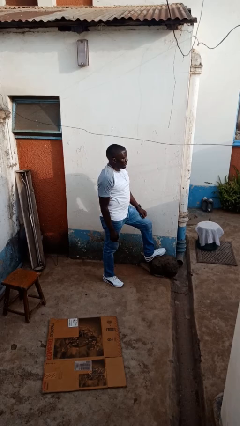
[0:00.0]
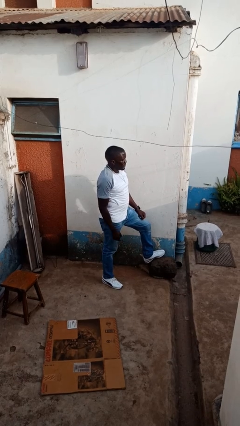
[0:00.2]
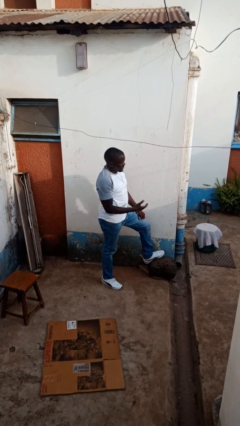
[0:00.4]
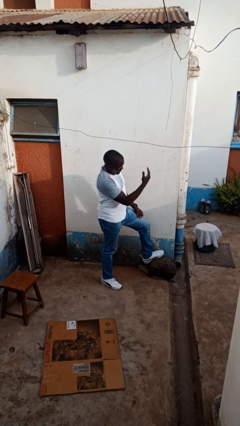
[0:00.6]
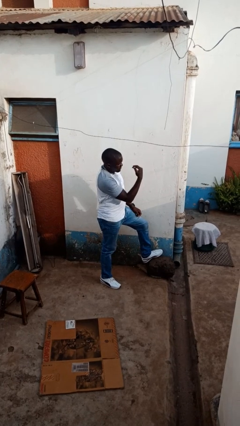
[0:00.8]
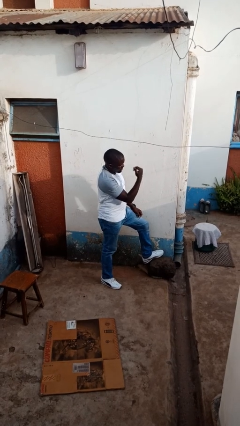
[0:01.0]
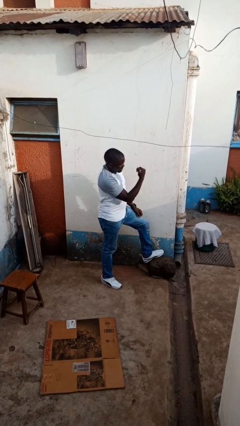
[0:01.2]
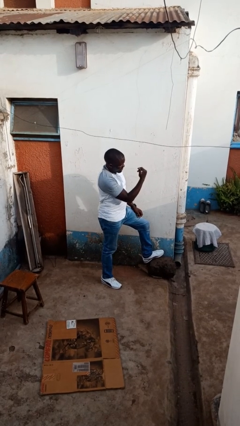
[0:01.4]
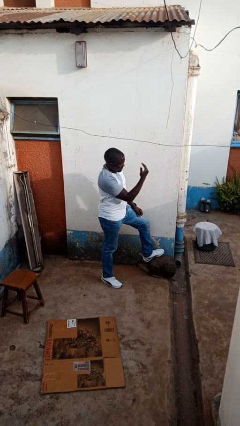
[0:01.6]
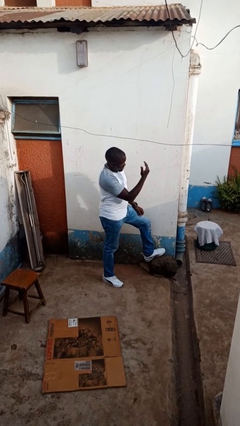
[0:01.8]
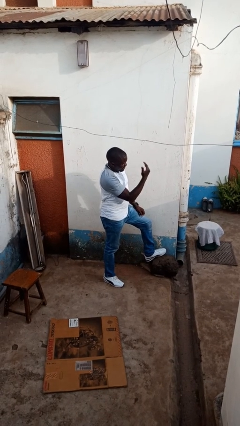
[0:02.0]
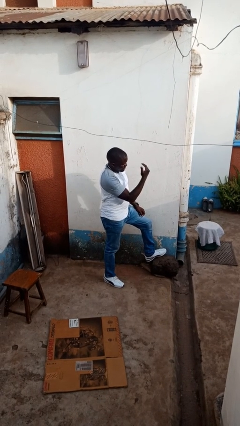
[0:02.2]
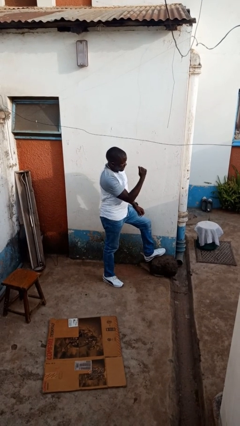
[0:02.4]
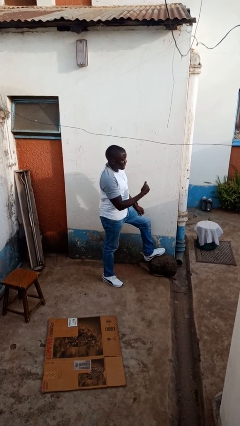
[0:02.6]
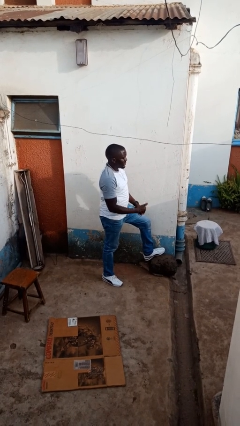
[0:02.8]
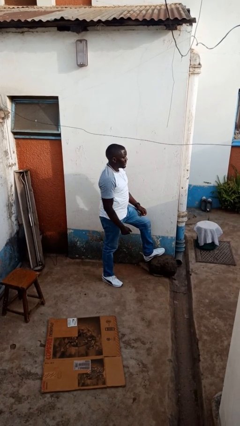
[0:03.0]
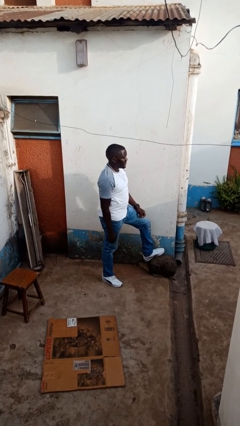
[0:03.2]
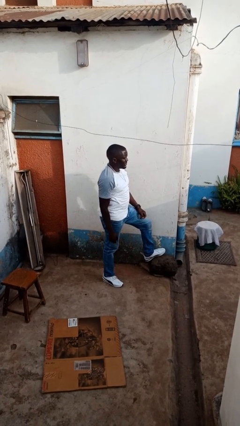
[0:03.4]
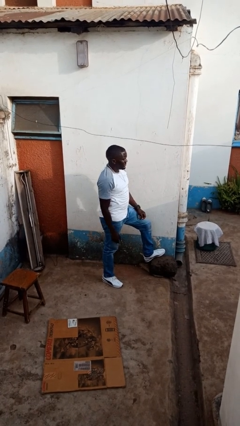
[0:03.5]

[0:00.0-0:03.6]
person gestures come here

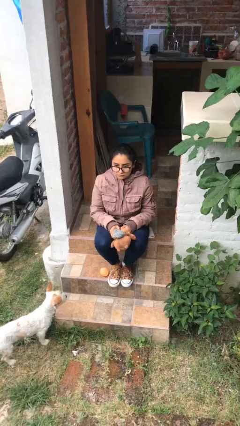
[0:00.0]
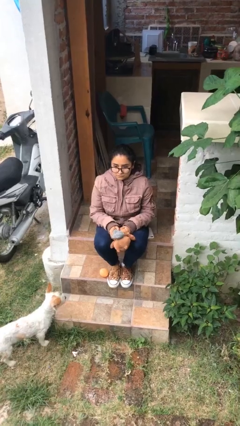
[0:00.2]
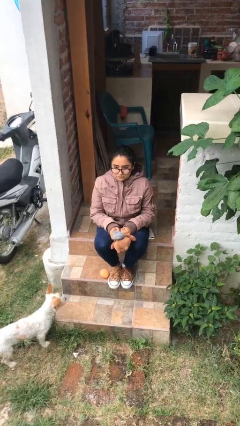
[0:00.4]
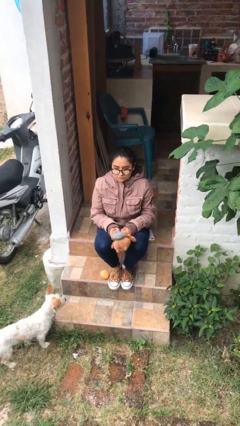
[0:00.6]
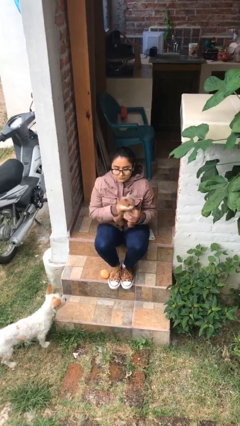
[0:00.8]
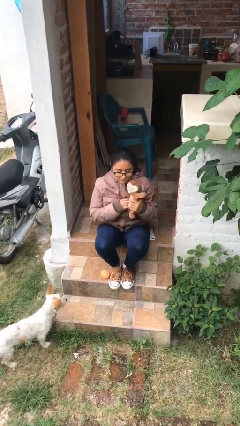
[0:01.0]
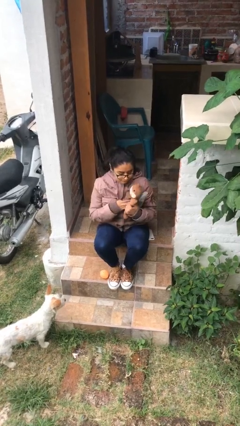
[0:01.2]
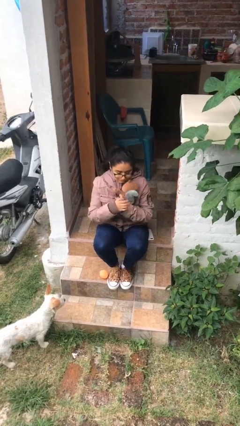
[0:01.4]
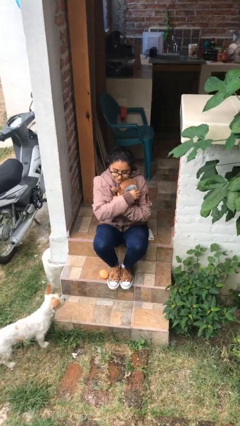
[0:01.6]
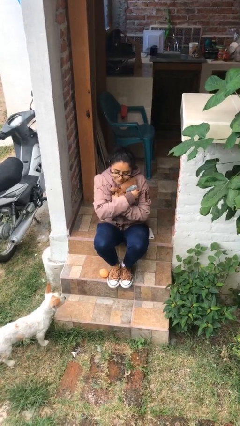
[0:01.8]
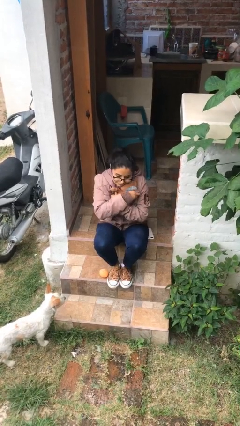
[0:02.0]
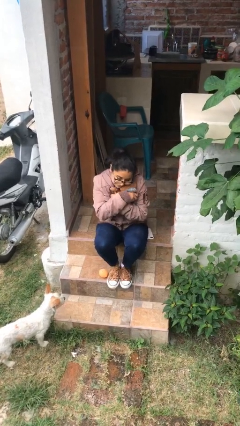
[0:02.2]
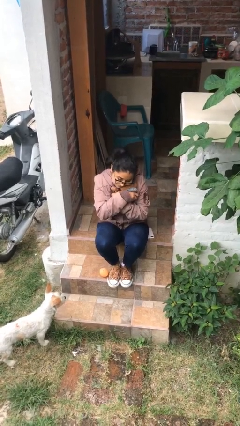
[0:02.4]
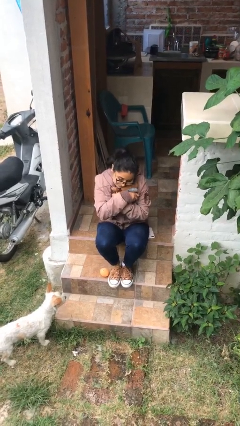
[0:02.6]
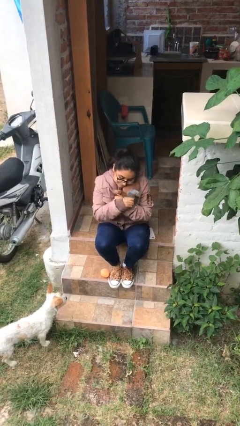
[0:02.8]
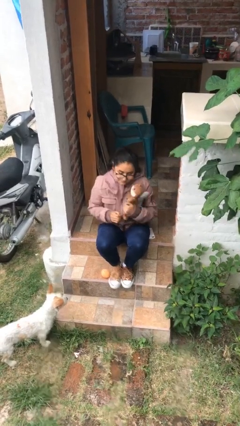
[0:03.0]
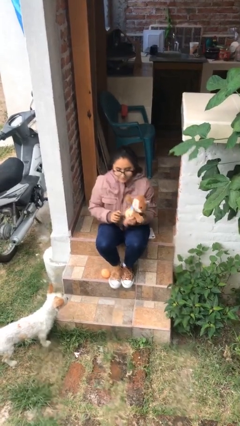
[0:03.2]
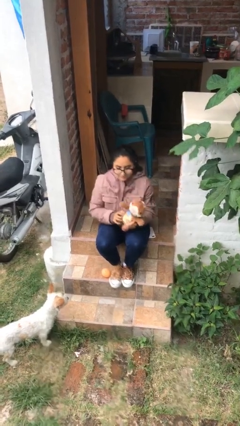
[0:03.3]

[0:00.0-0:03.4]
person hugs stuffed animal

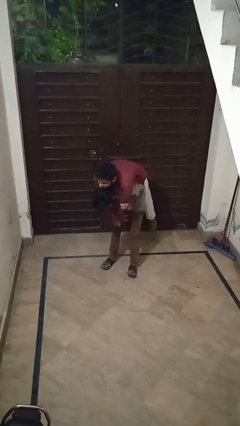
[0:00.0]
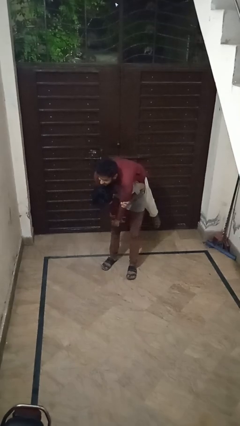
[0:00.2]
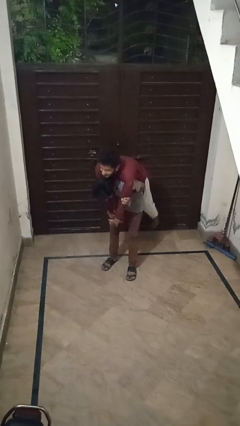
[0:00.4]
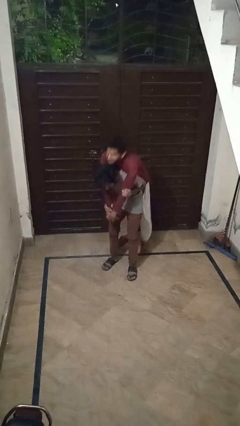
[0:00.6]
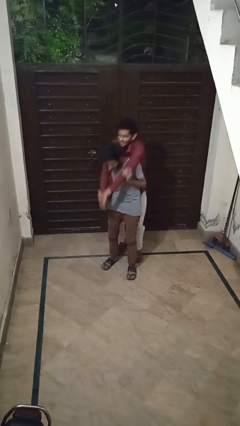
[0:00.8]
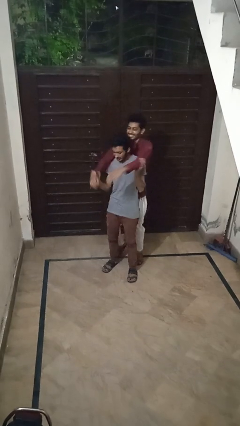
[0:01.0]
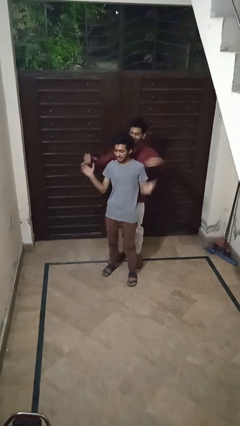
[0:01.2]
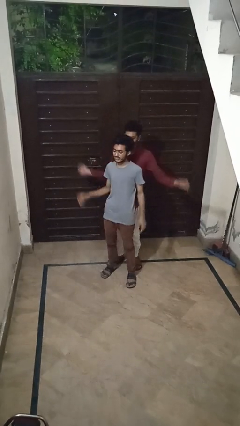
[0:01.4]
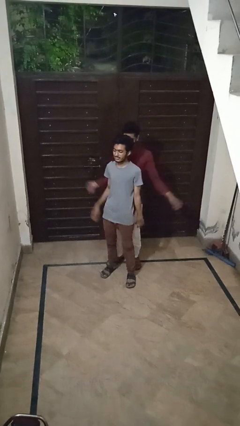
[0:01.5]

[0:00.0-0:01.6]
person puts down person

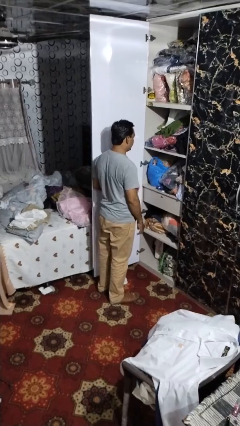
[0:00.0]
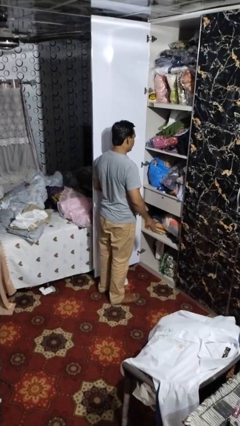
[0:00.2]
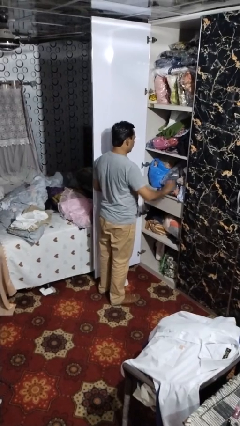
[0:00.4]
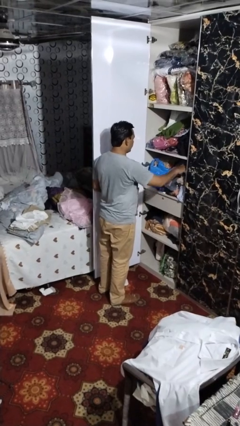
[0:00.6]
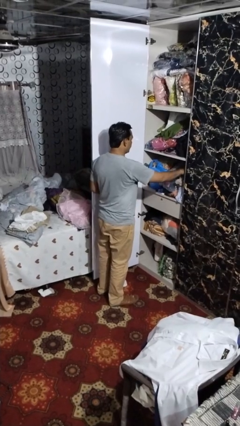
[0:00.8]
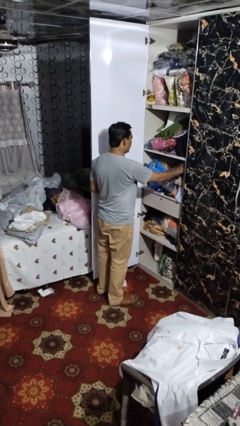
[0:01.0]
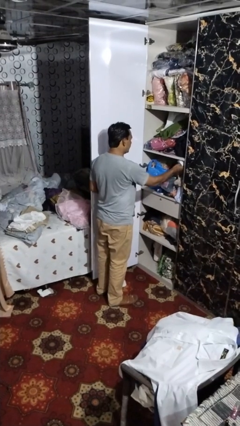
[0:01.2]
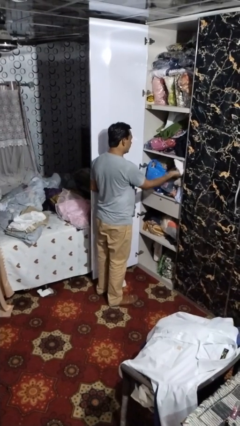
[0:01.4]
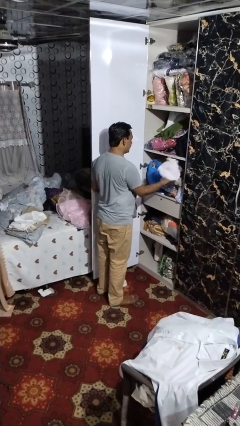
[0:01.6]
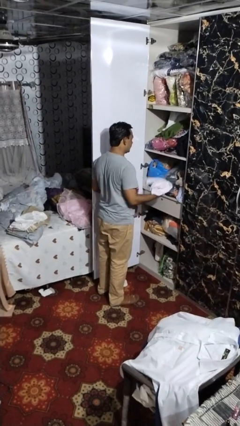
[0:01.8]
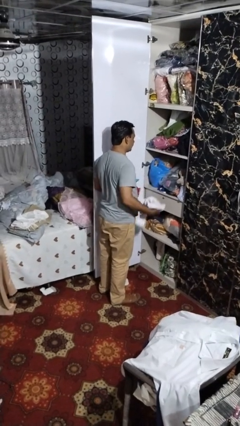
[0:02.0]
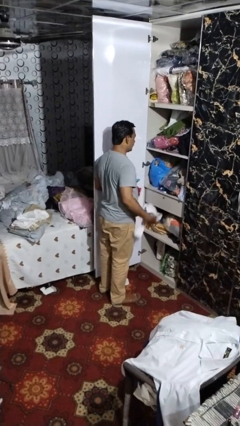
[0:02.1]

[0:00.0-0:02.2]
person takes clothes from dresser

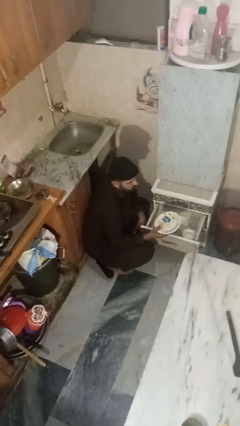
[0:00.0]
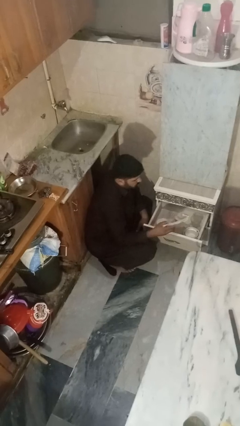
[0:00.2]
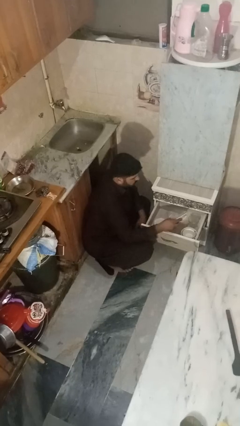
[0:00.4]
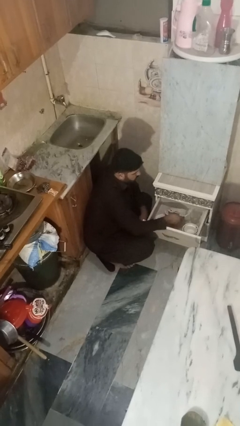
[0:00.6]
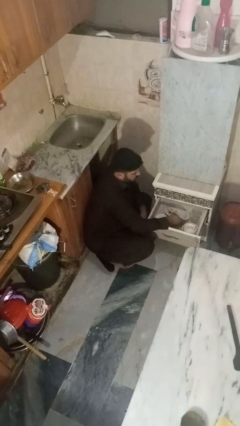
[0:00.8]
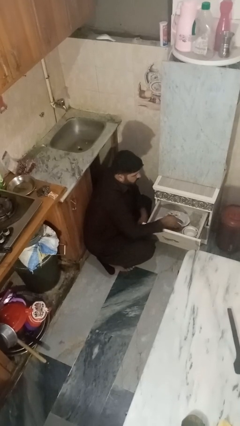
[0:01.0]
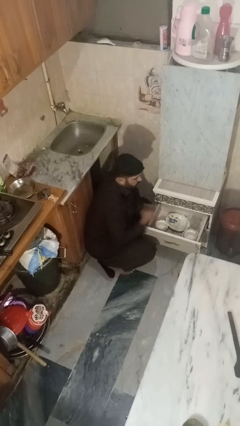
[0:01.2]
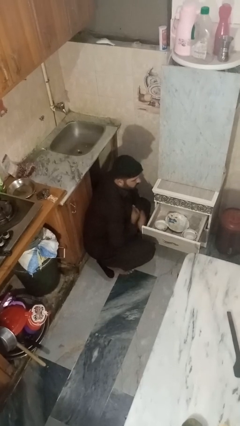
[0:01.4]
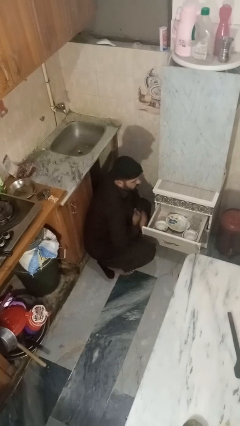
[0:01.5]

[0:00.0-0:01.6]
person puts object into kitchen drawer

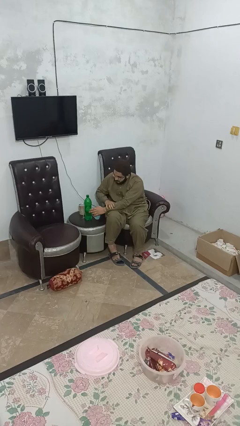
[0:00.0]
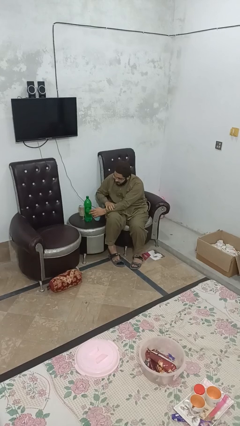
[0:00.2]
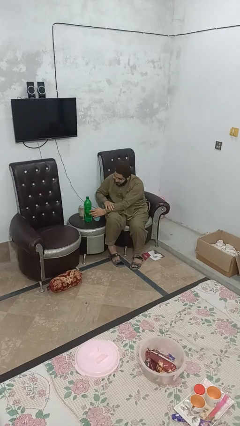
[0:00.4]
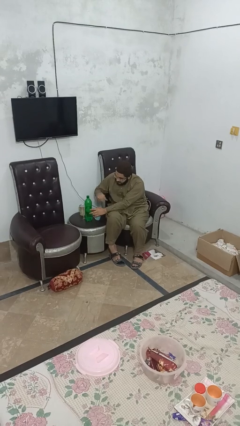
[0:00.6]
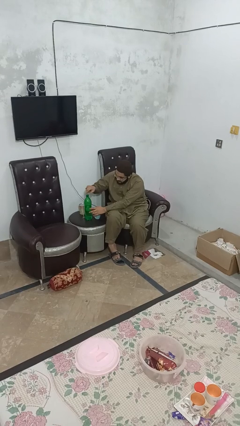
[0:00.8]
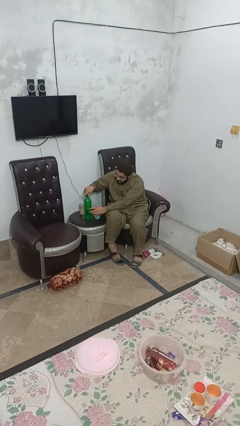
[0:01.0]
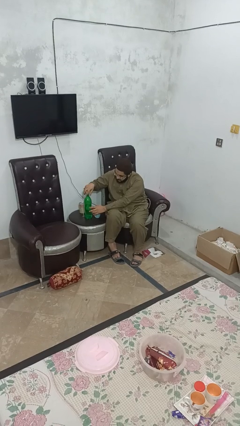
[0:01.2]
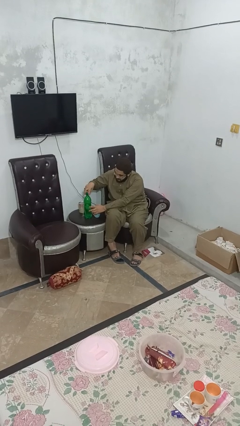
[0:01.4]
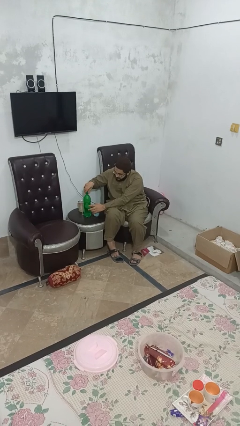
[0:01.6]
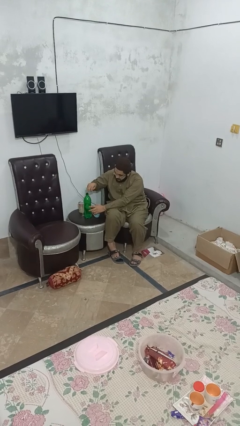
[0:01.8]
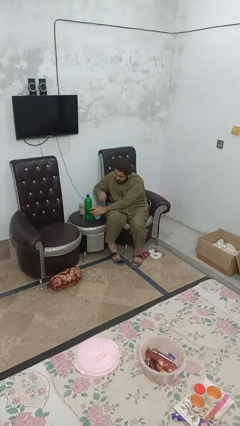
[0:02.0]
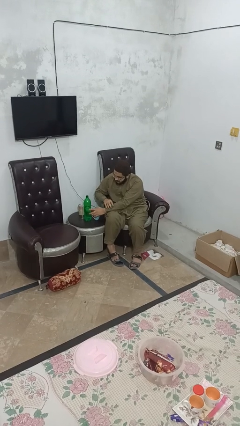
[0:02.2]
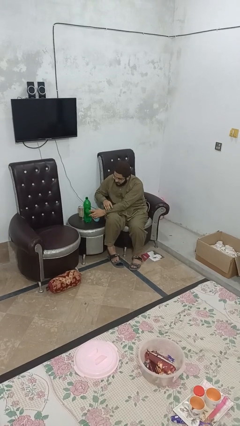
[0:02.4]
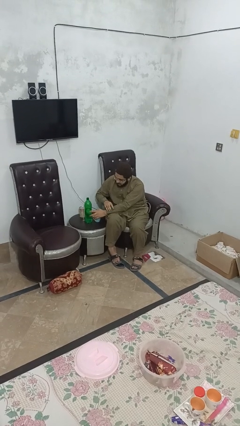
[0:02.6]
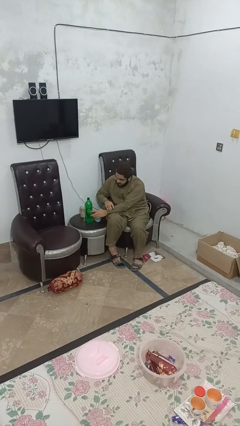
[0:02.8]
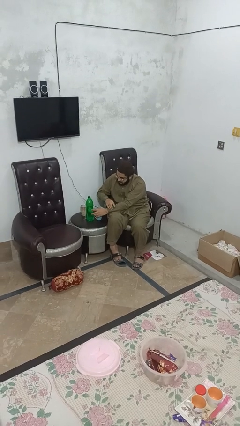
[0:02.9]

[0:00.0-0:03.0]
person unscrews lid from bottle

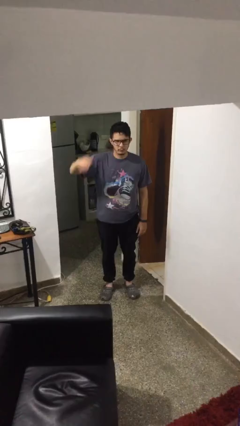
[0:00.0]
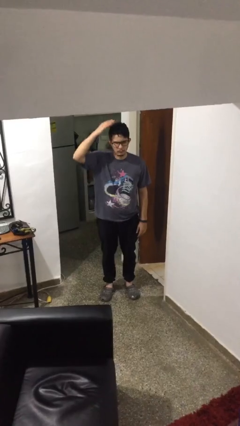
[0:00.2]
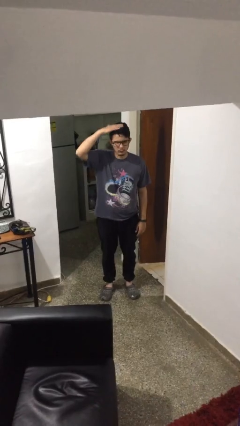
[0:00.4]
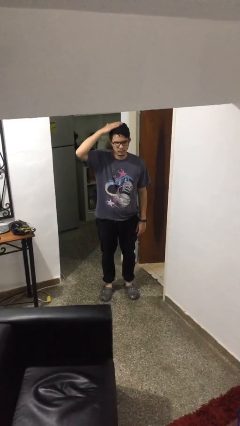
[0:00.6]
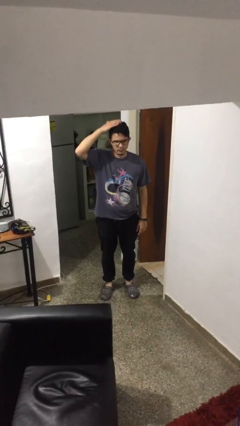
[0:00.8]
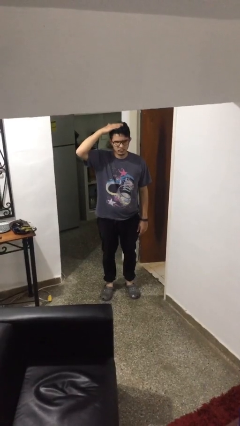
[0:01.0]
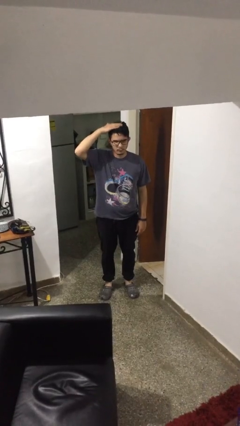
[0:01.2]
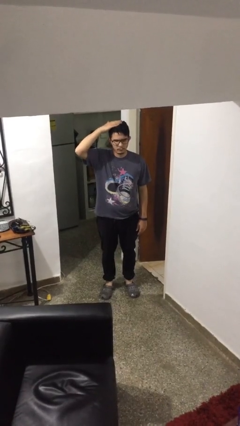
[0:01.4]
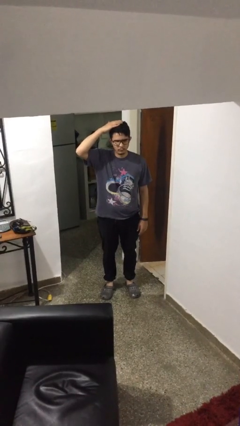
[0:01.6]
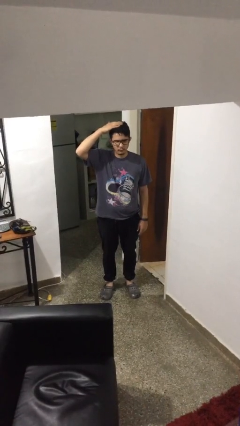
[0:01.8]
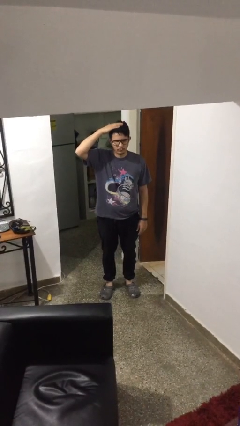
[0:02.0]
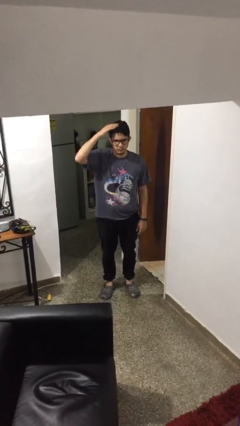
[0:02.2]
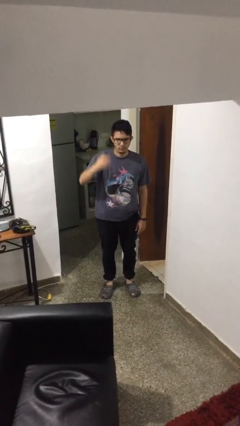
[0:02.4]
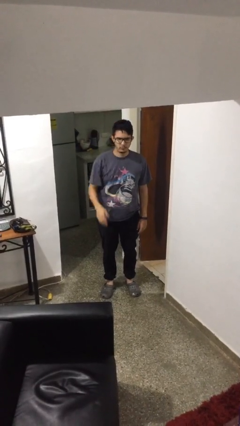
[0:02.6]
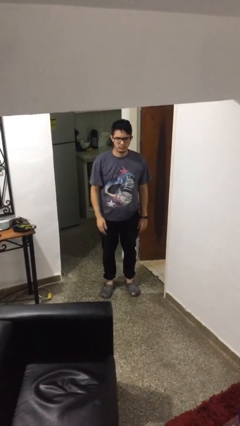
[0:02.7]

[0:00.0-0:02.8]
person pats head
